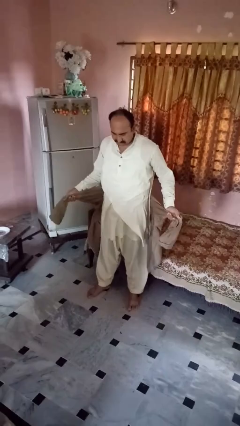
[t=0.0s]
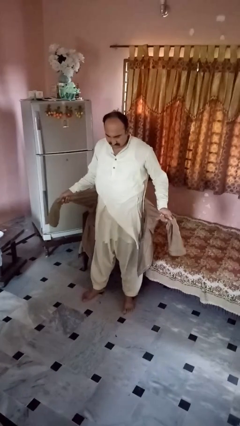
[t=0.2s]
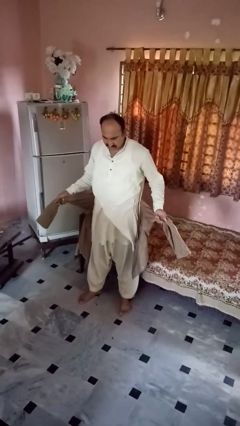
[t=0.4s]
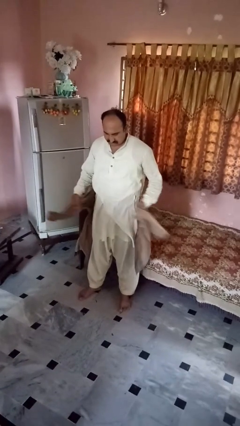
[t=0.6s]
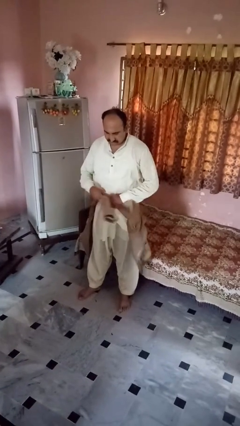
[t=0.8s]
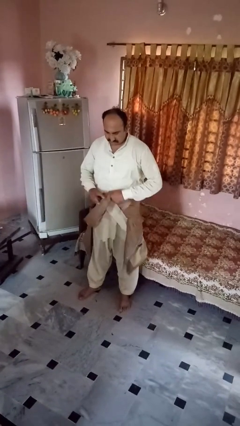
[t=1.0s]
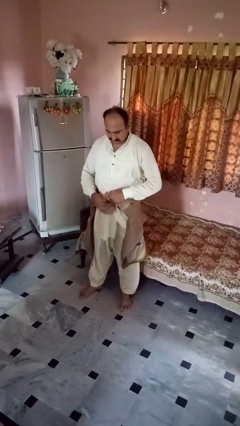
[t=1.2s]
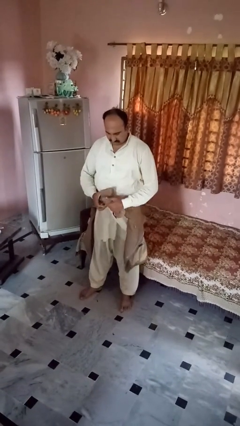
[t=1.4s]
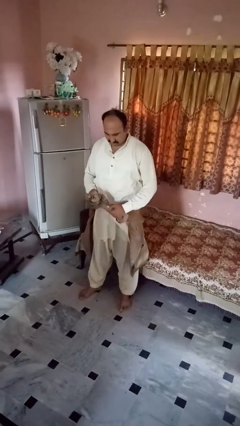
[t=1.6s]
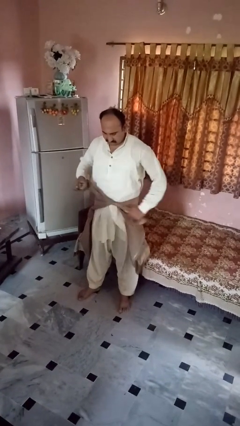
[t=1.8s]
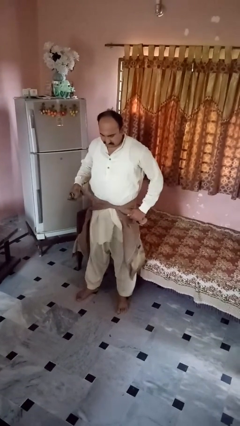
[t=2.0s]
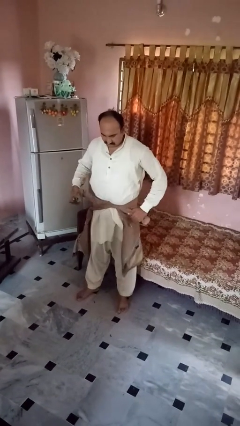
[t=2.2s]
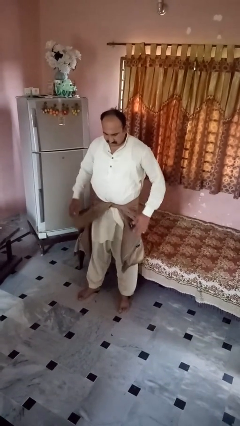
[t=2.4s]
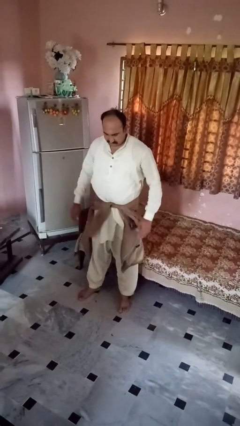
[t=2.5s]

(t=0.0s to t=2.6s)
person ties jacket around waist

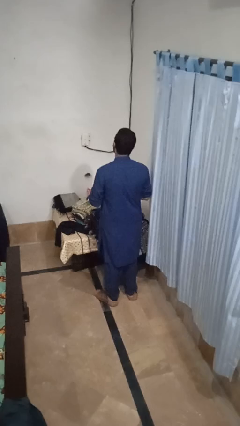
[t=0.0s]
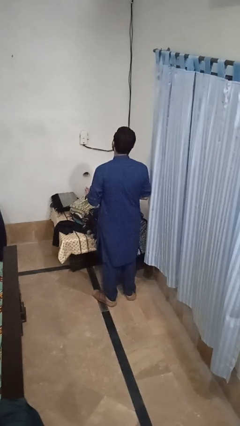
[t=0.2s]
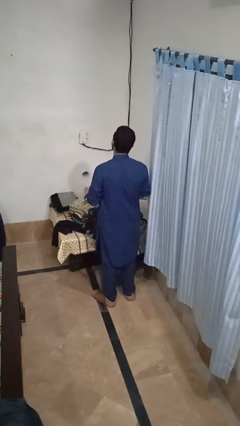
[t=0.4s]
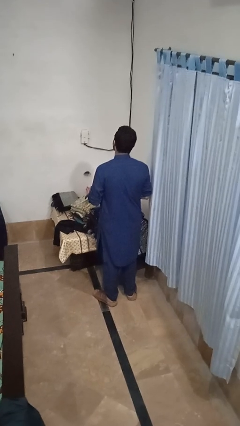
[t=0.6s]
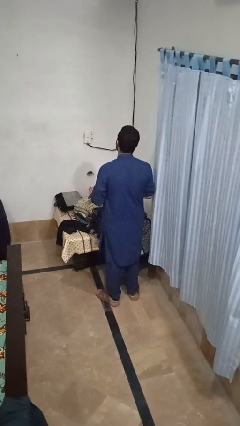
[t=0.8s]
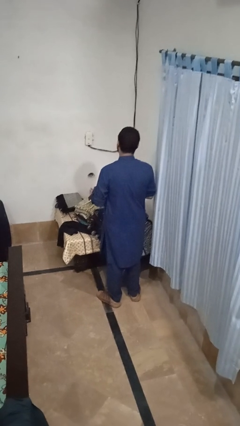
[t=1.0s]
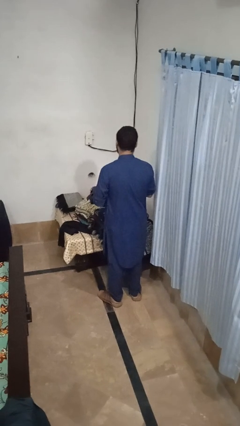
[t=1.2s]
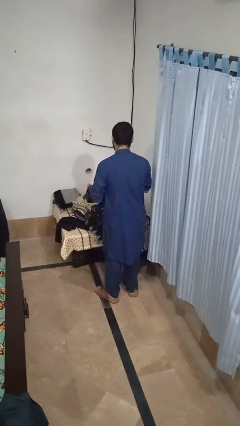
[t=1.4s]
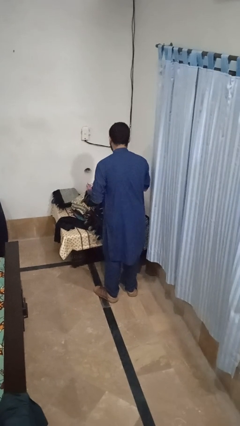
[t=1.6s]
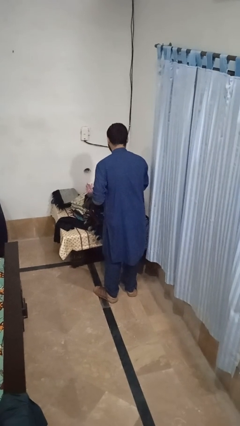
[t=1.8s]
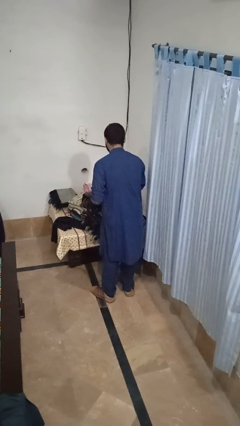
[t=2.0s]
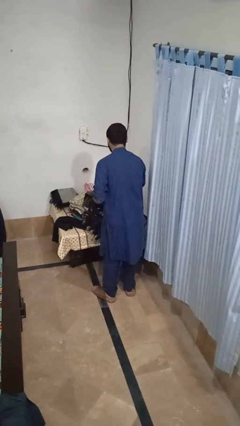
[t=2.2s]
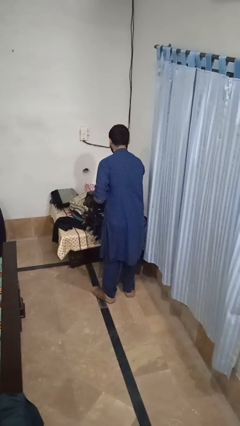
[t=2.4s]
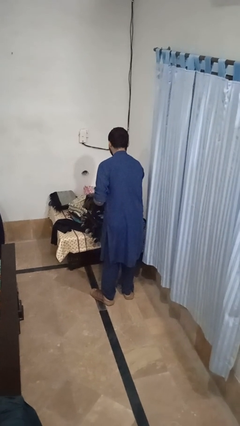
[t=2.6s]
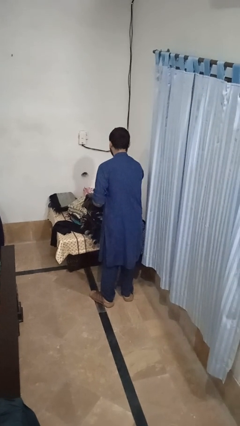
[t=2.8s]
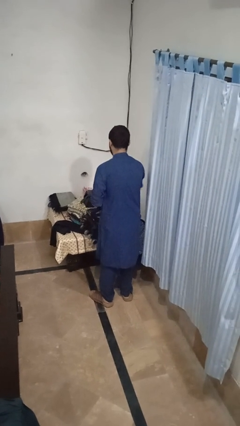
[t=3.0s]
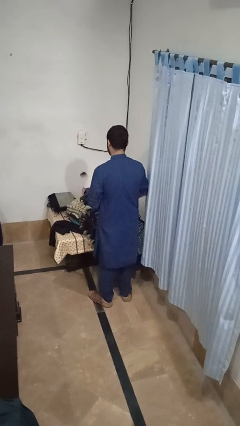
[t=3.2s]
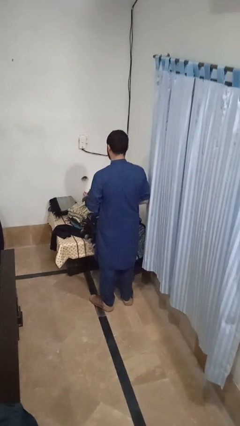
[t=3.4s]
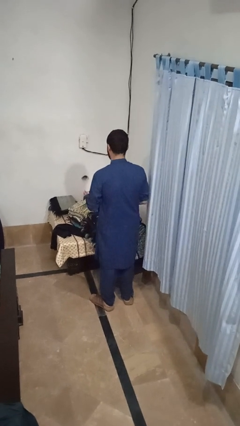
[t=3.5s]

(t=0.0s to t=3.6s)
person loads clothes into suitcase

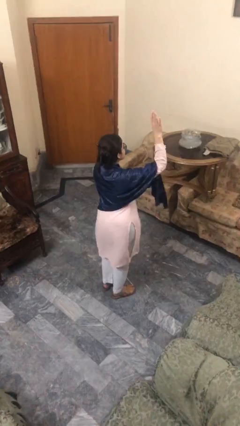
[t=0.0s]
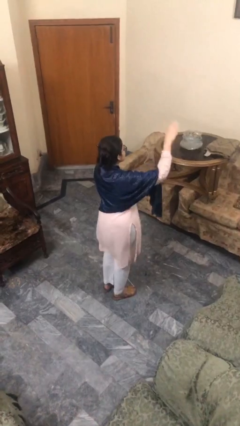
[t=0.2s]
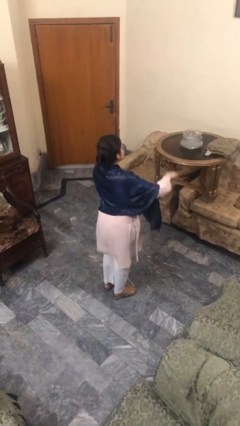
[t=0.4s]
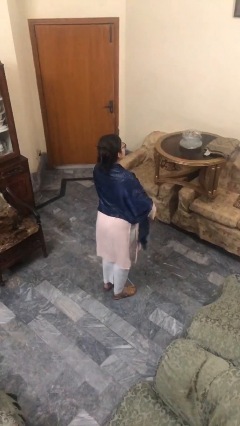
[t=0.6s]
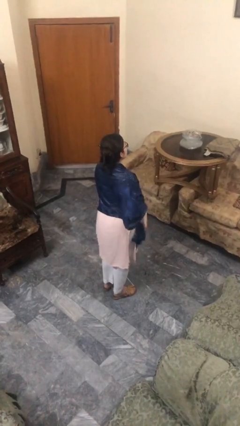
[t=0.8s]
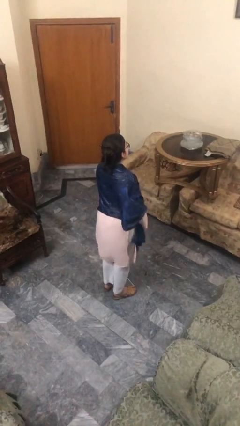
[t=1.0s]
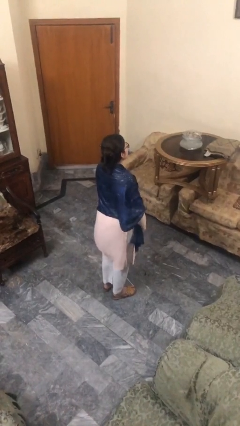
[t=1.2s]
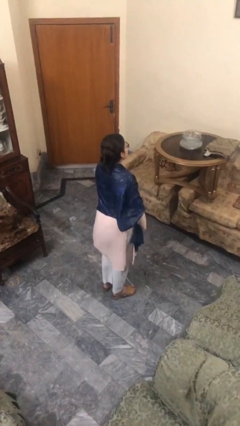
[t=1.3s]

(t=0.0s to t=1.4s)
person gestures lower hand

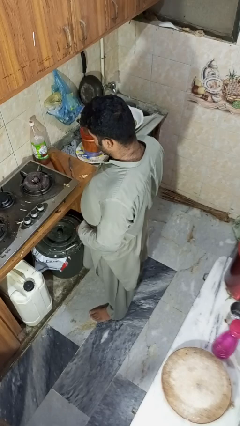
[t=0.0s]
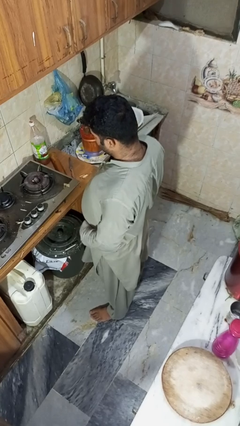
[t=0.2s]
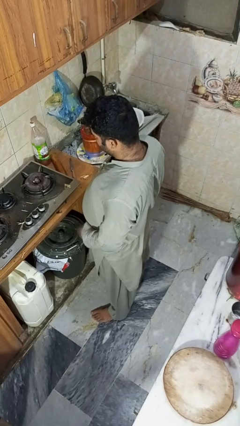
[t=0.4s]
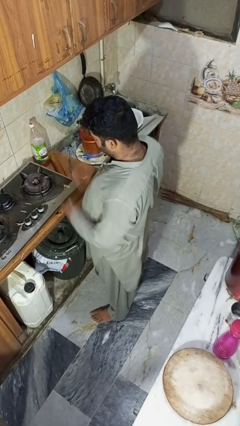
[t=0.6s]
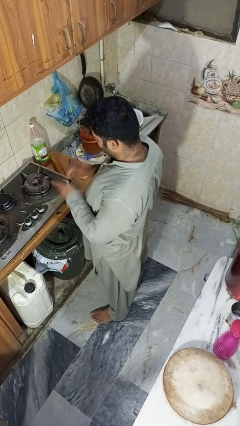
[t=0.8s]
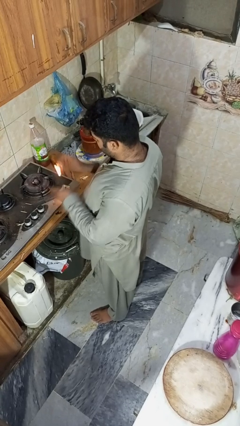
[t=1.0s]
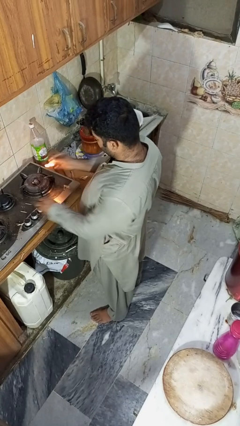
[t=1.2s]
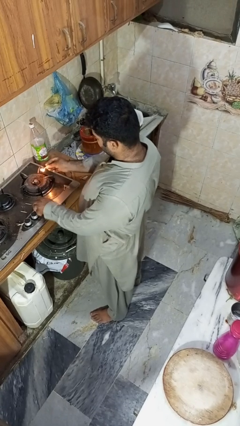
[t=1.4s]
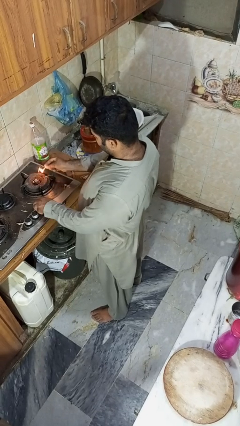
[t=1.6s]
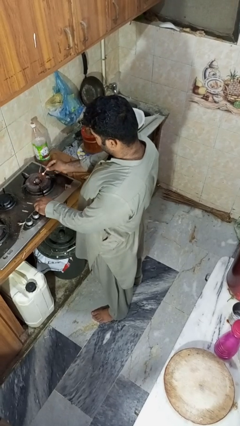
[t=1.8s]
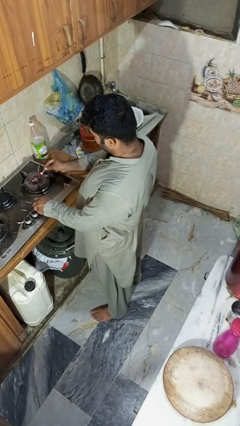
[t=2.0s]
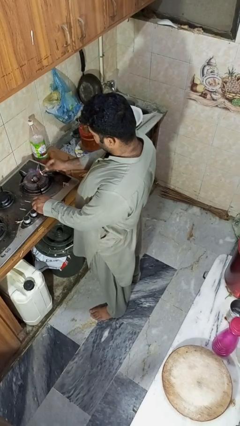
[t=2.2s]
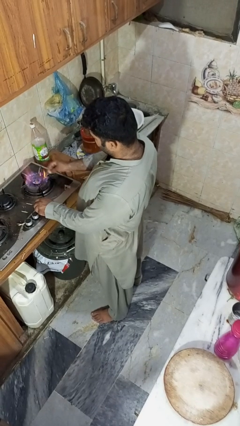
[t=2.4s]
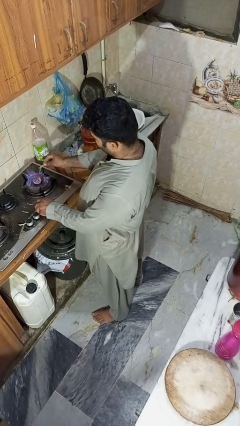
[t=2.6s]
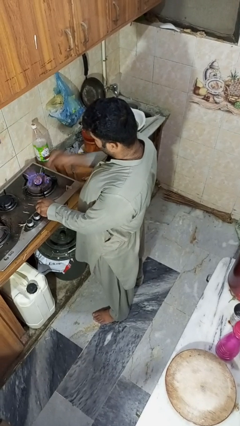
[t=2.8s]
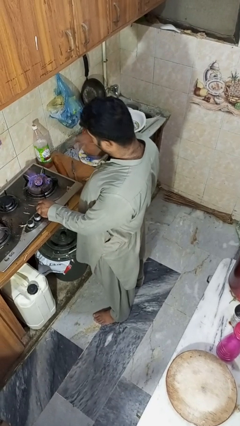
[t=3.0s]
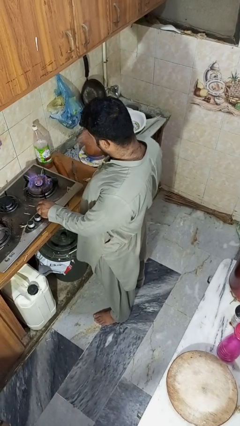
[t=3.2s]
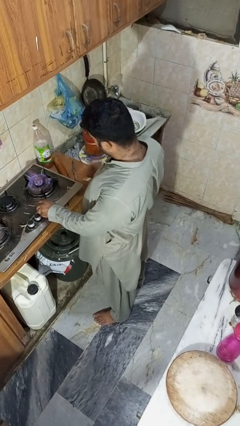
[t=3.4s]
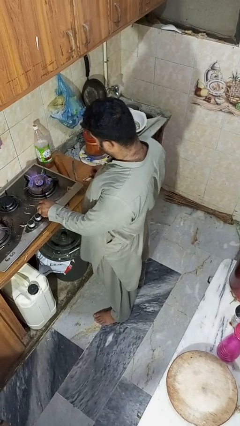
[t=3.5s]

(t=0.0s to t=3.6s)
person turns on stovetop

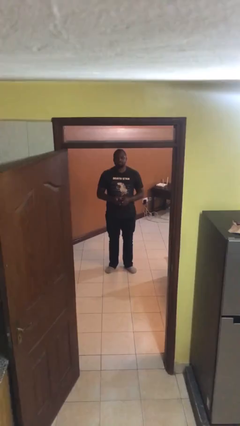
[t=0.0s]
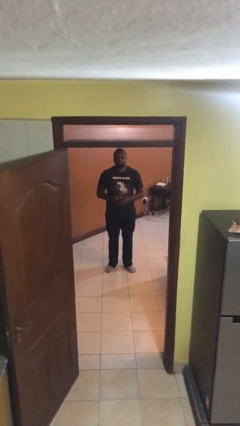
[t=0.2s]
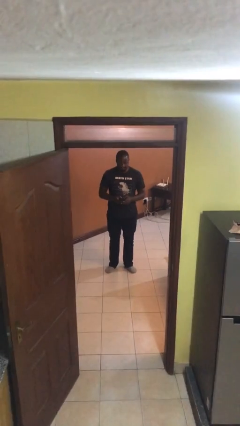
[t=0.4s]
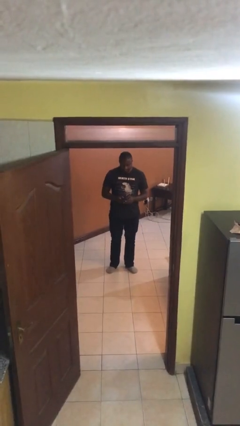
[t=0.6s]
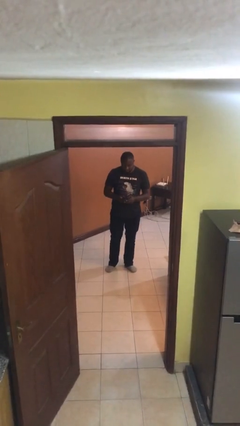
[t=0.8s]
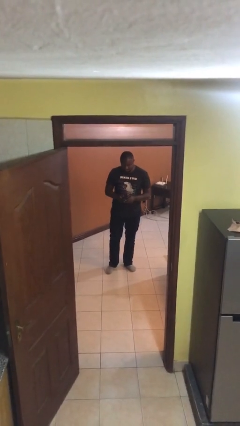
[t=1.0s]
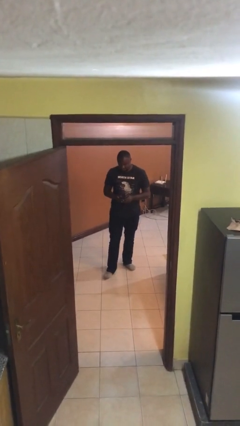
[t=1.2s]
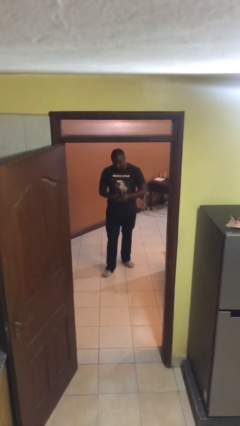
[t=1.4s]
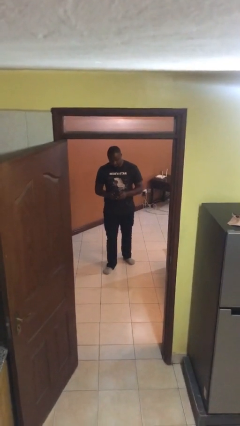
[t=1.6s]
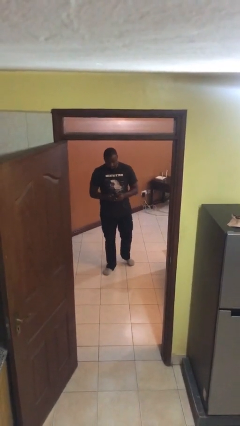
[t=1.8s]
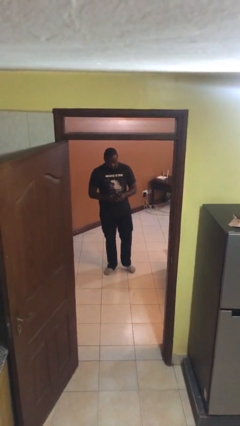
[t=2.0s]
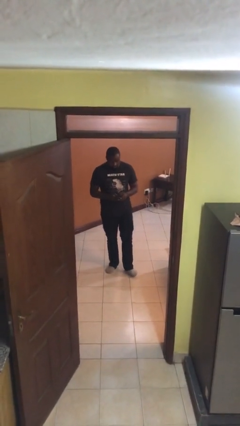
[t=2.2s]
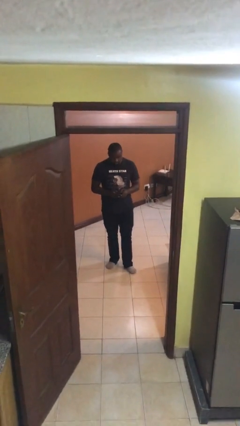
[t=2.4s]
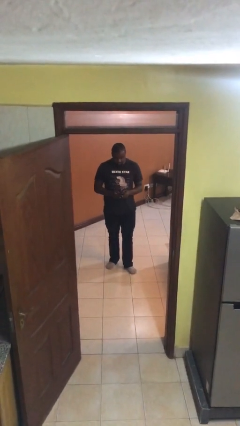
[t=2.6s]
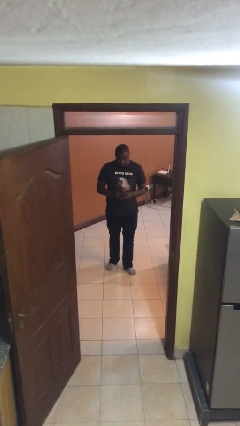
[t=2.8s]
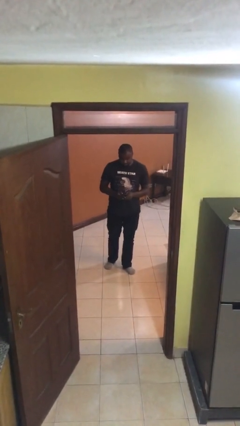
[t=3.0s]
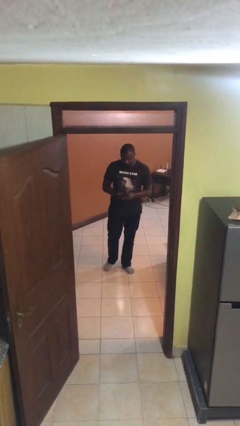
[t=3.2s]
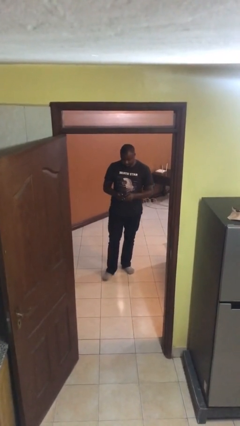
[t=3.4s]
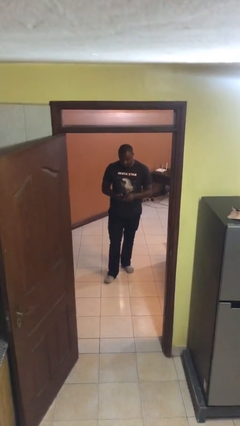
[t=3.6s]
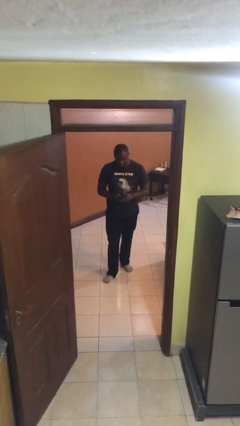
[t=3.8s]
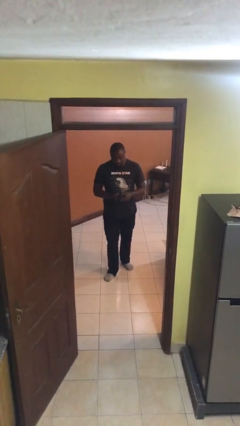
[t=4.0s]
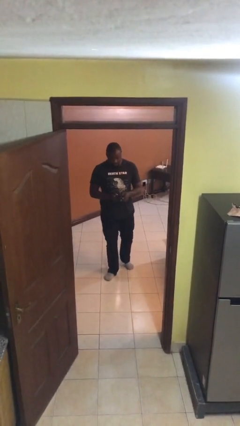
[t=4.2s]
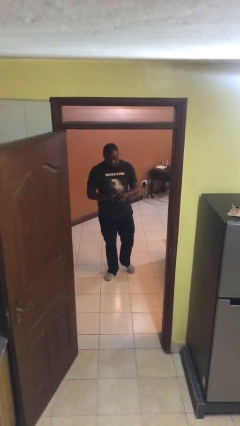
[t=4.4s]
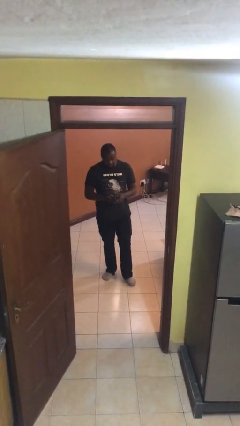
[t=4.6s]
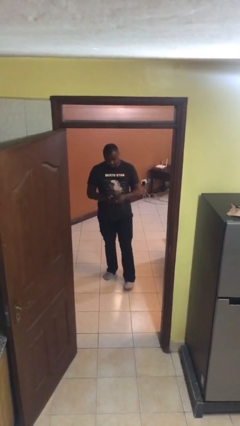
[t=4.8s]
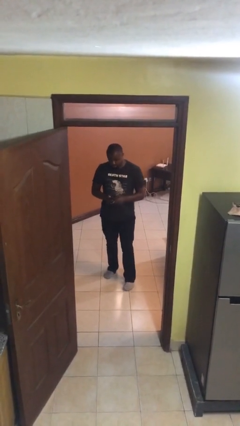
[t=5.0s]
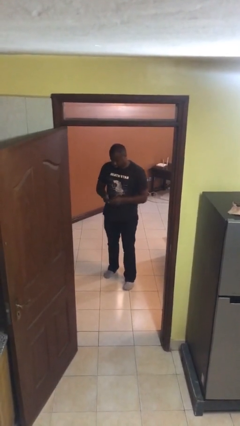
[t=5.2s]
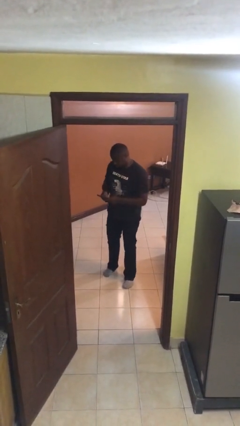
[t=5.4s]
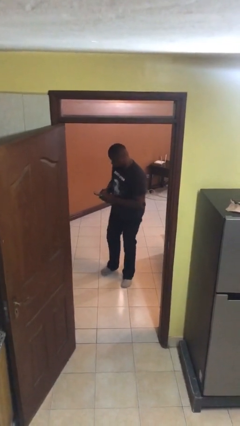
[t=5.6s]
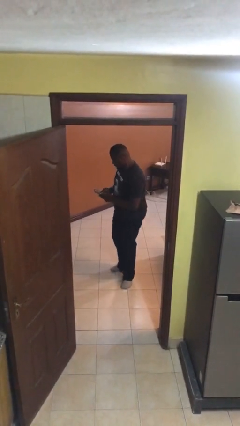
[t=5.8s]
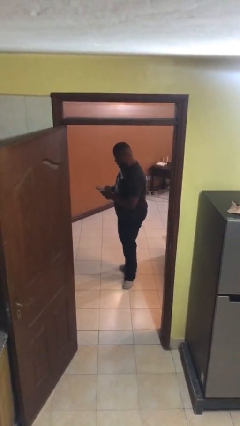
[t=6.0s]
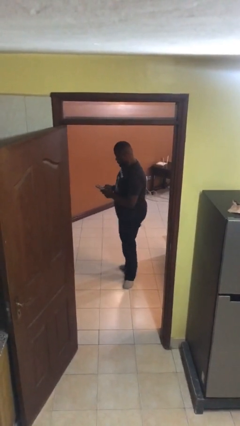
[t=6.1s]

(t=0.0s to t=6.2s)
person texts on phone

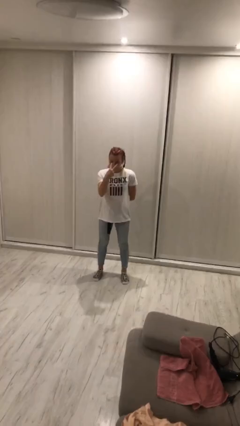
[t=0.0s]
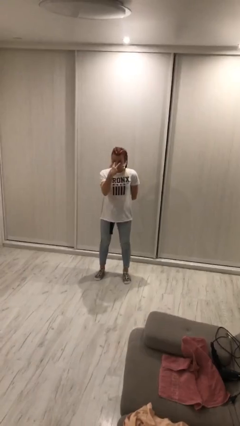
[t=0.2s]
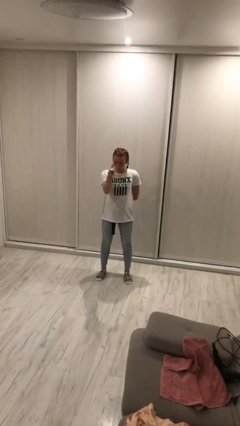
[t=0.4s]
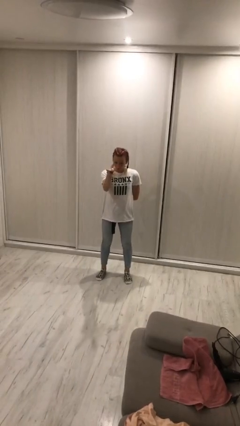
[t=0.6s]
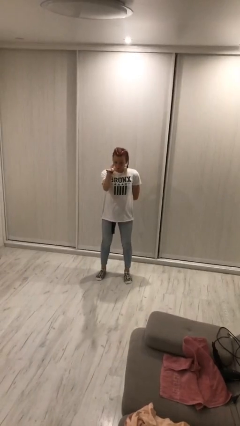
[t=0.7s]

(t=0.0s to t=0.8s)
person gestures watch closely
